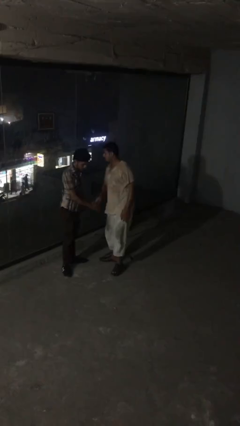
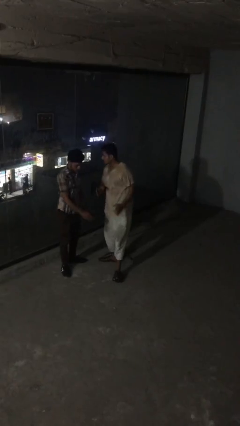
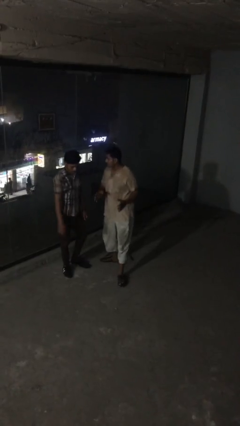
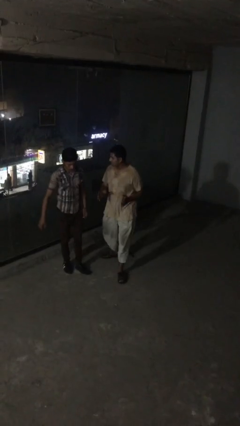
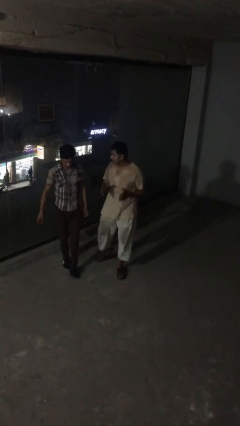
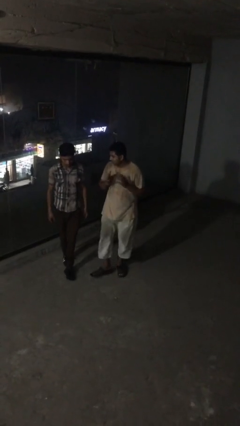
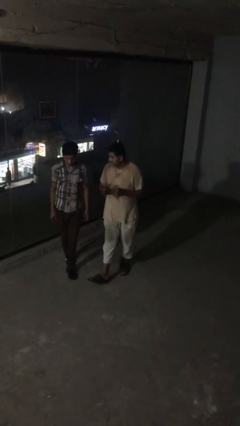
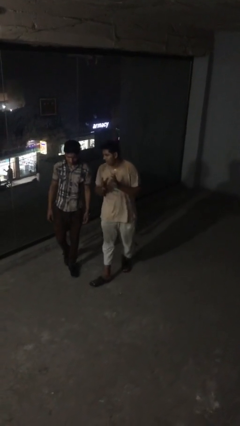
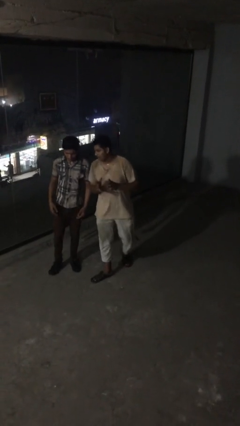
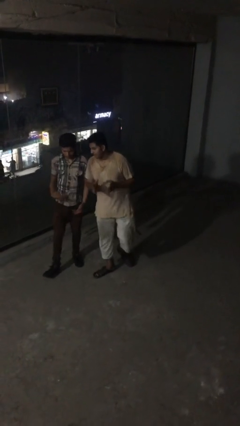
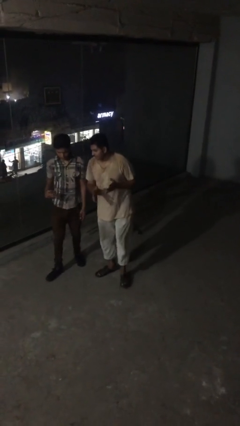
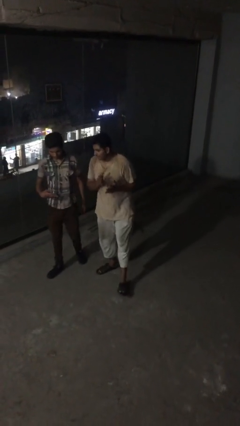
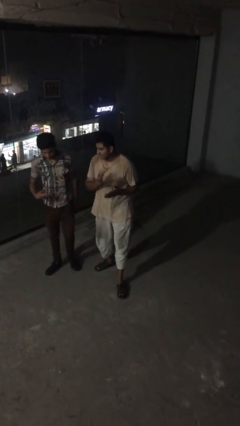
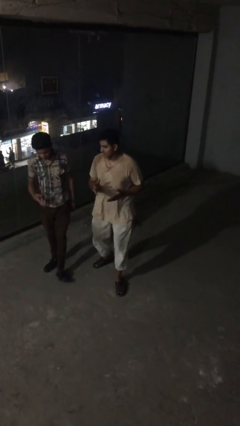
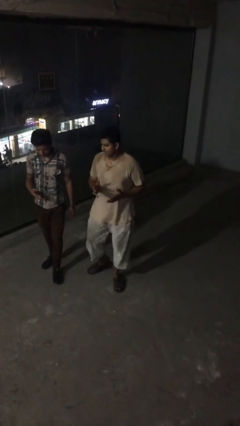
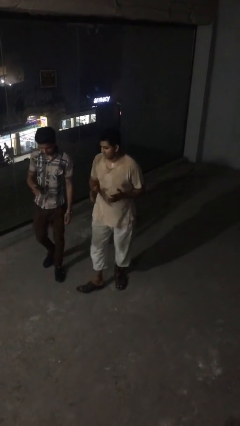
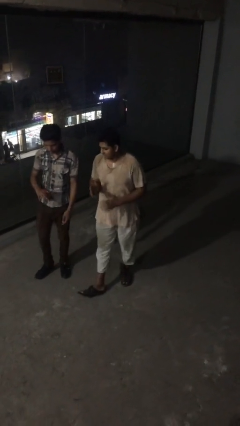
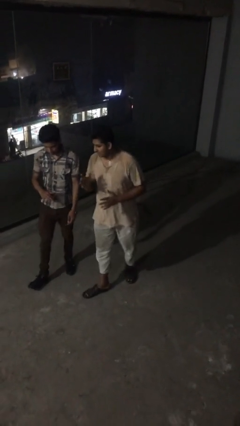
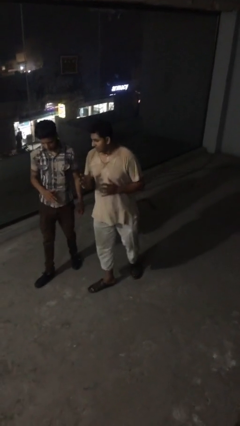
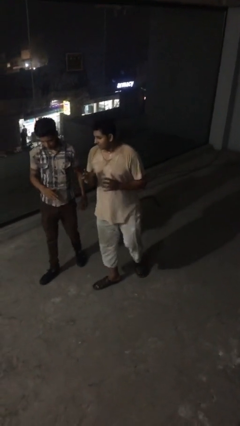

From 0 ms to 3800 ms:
person talks to person

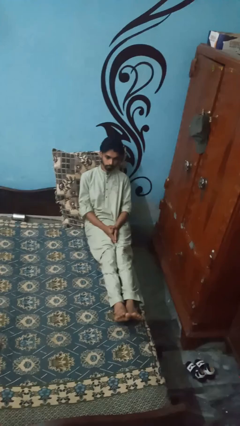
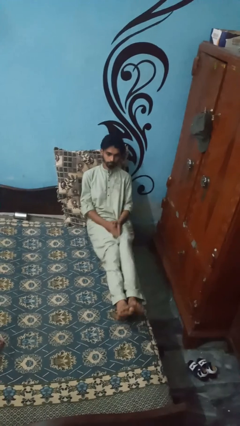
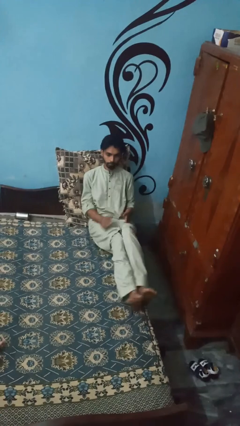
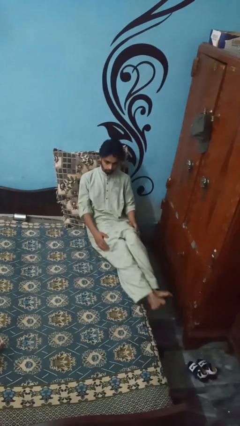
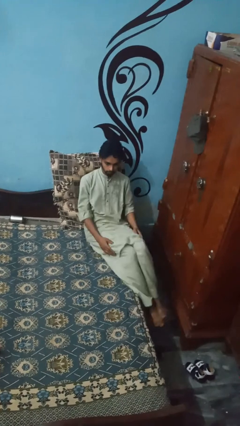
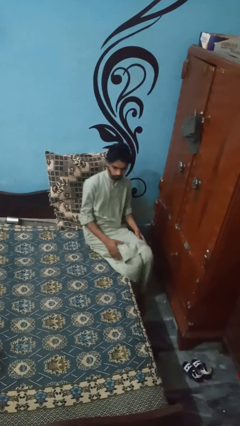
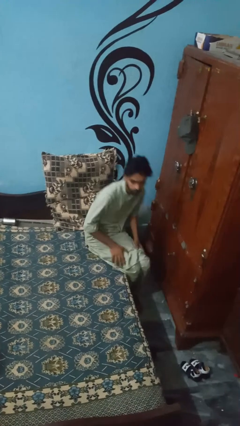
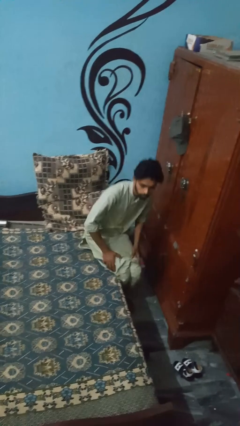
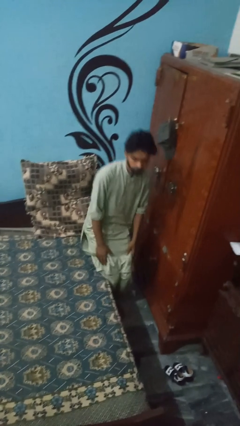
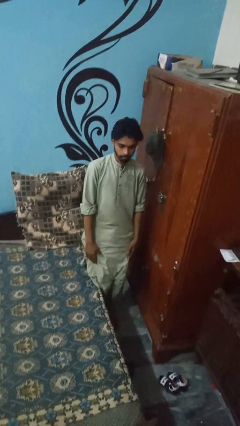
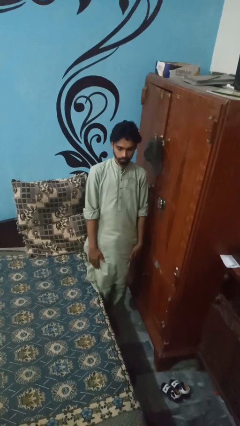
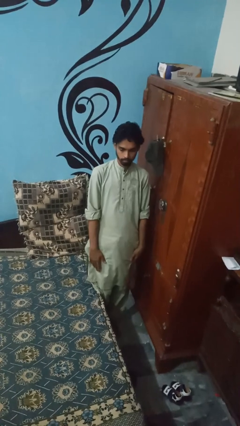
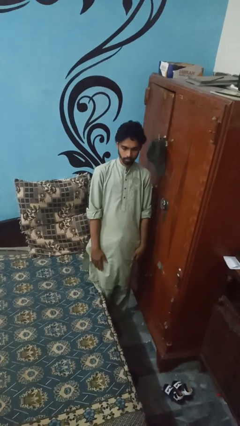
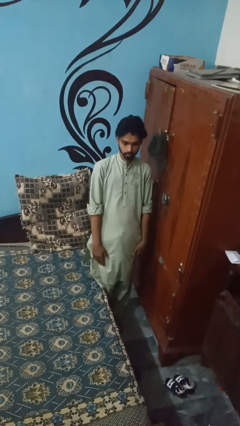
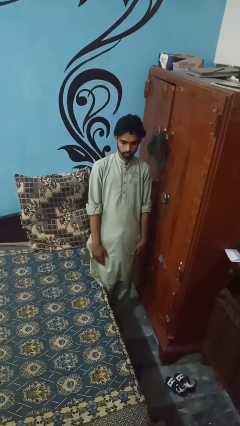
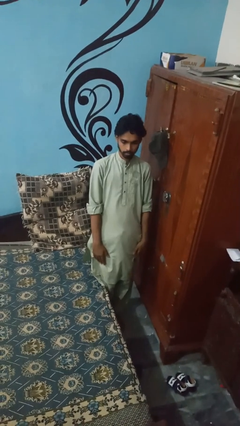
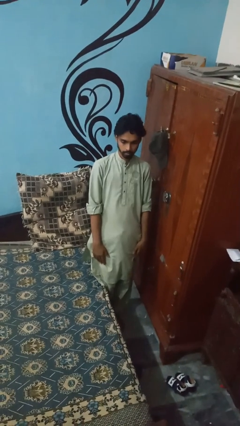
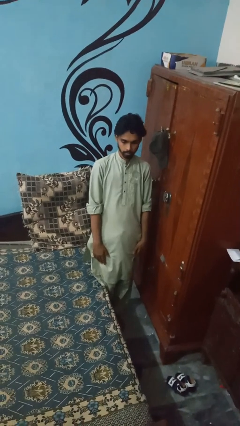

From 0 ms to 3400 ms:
person stands up

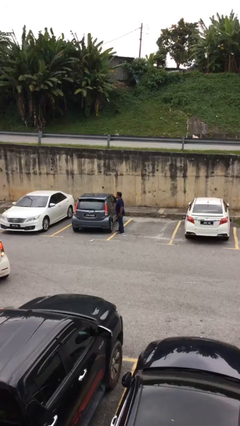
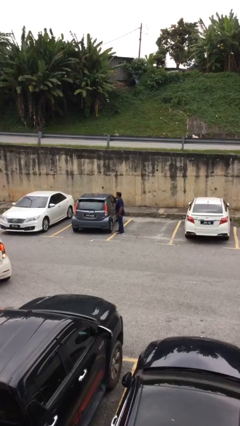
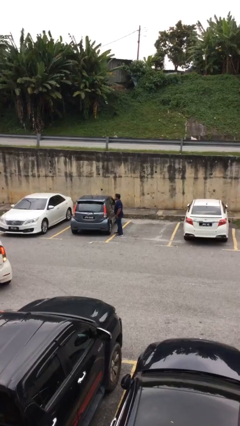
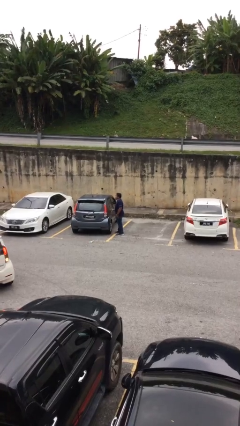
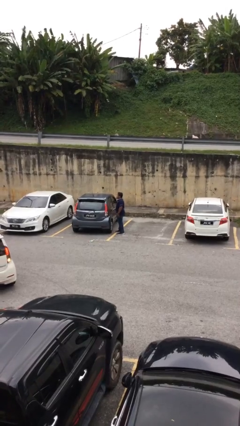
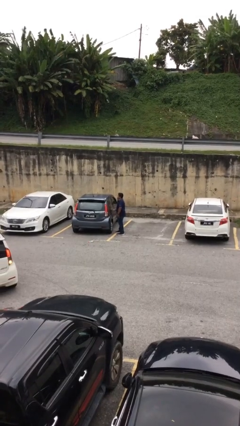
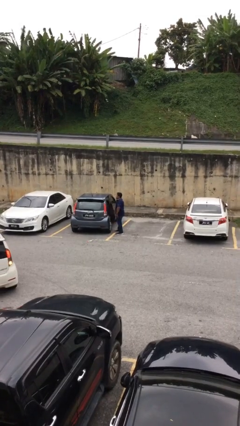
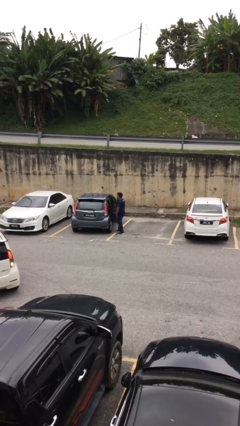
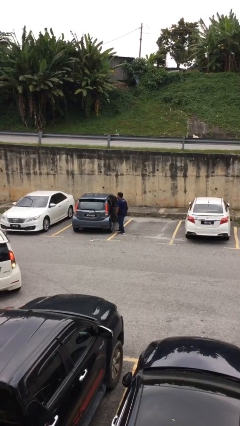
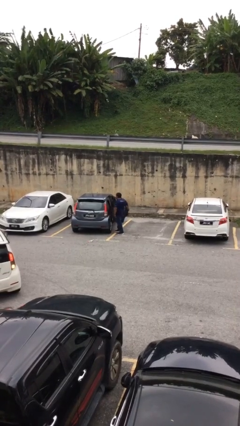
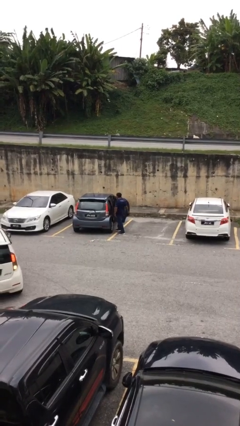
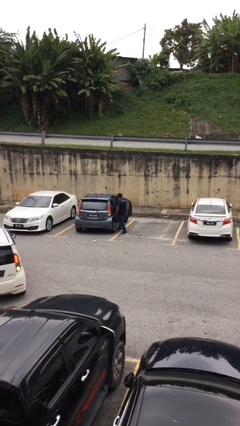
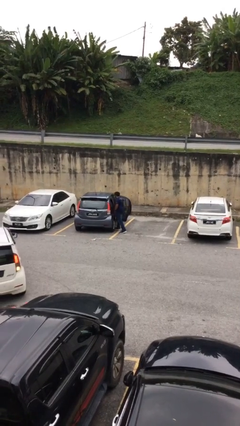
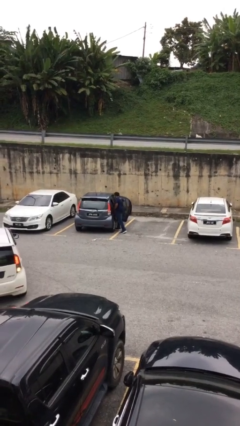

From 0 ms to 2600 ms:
person opens car door

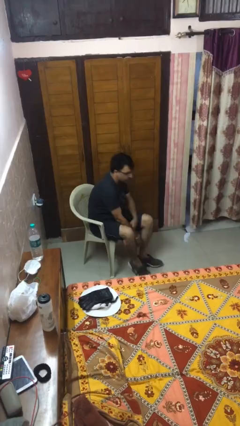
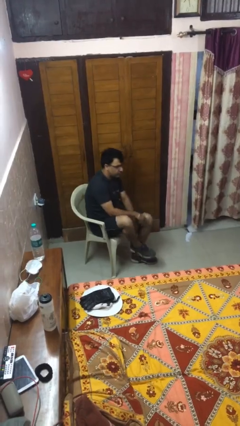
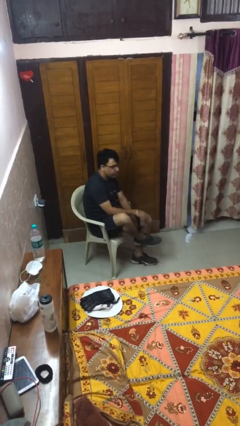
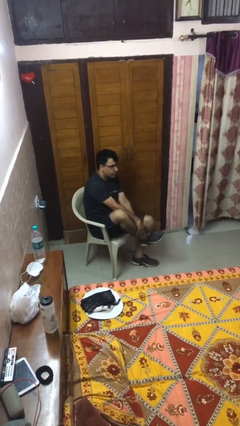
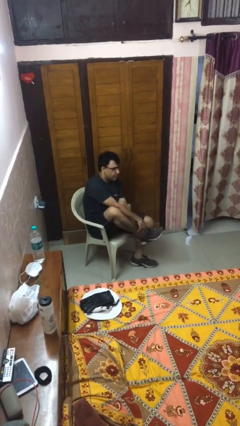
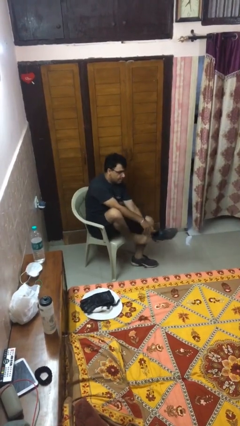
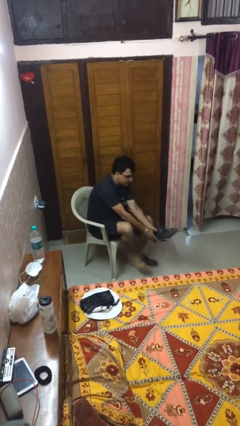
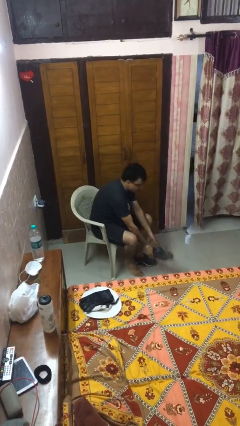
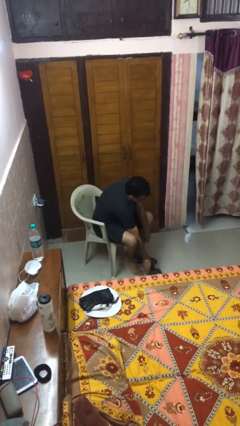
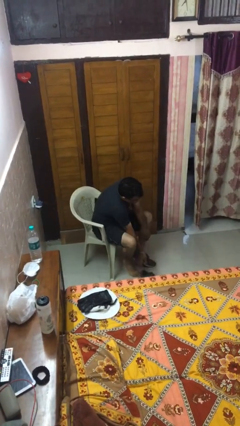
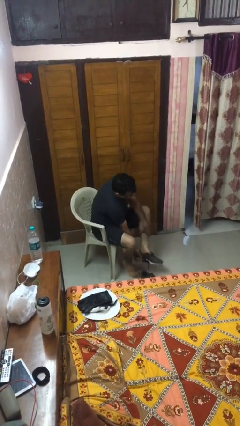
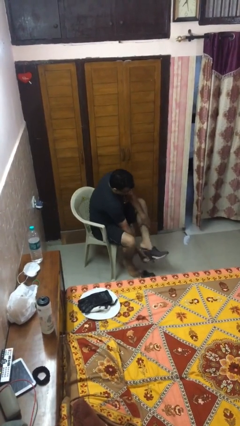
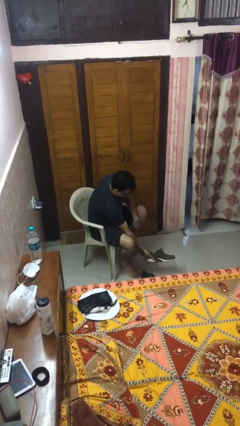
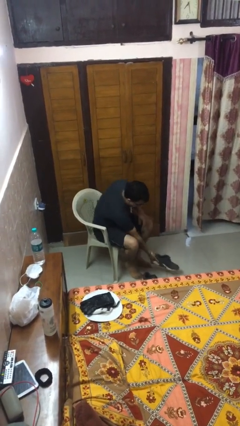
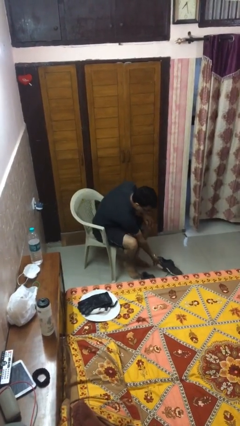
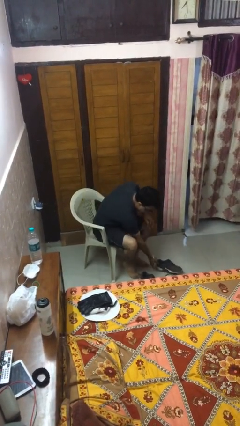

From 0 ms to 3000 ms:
person takes off shoes

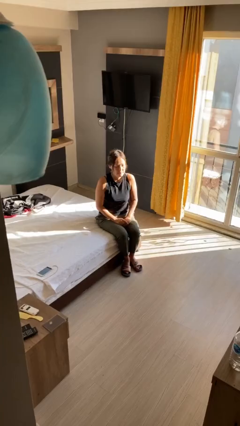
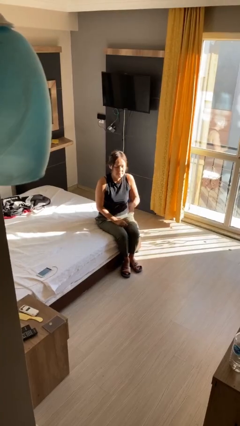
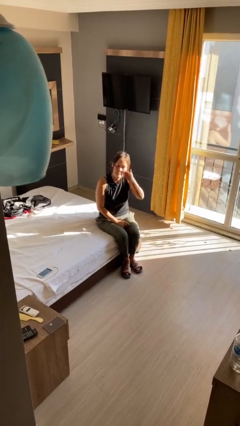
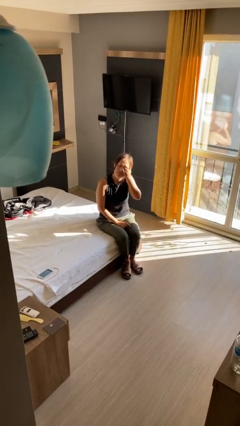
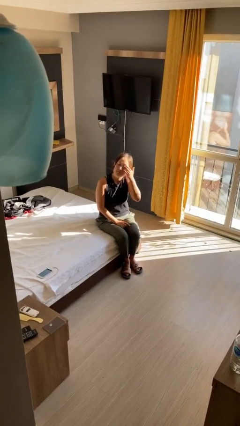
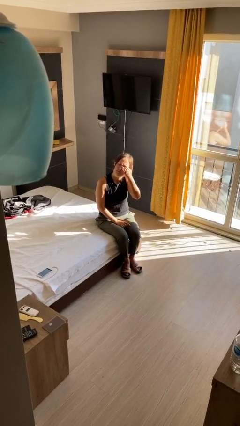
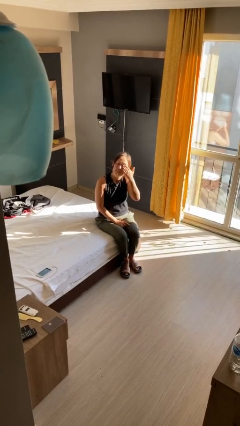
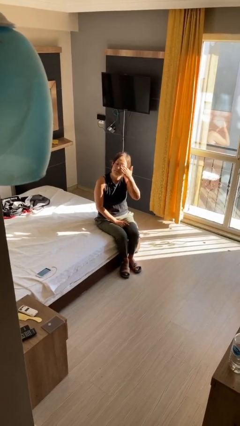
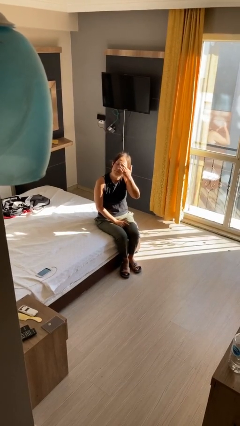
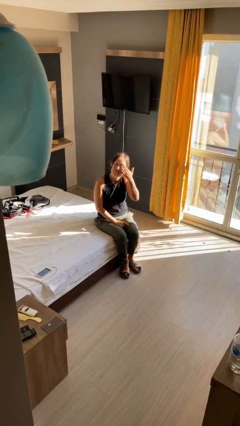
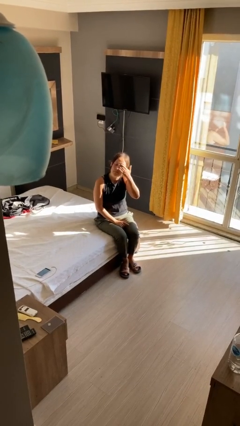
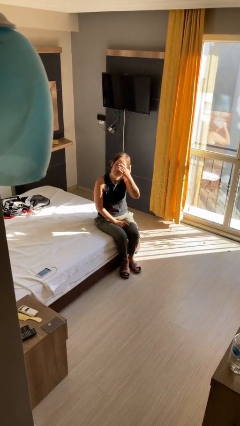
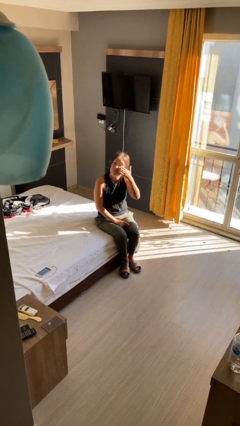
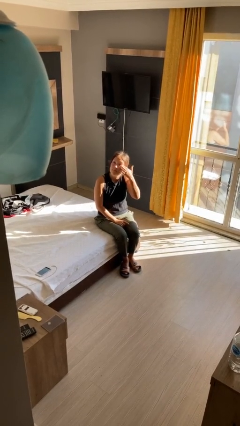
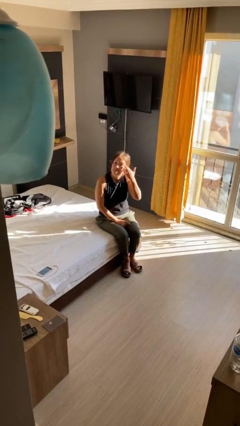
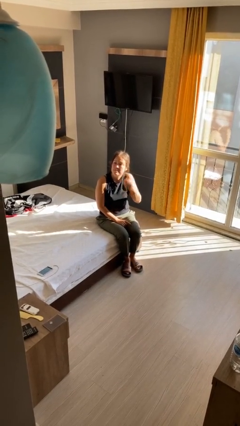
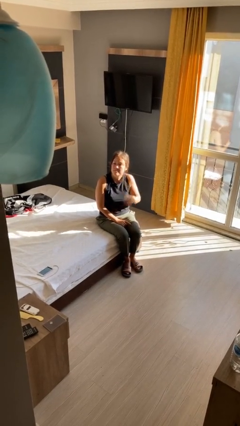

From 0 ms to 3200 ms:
person rubs eyes

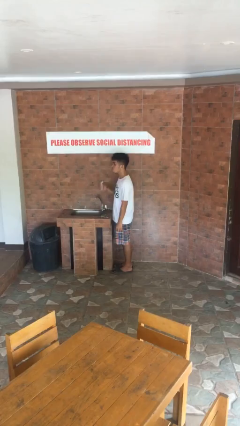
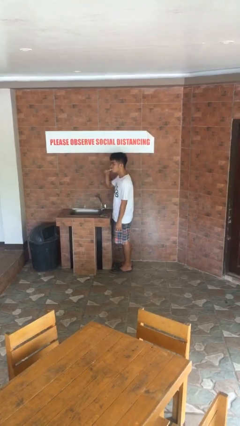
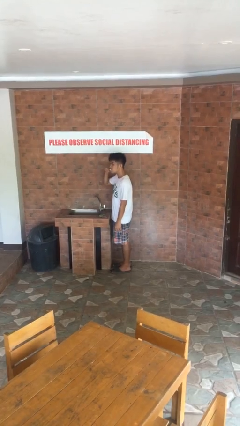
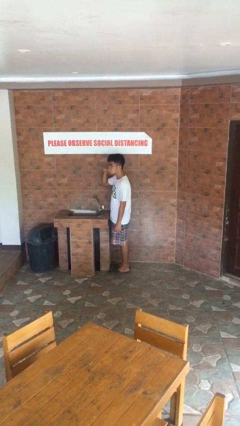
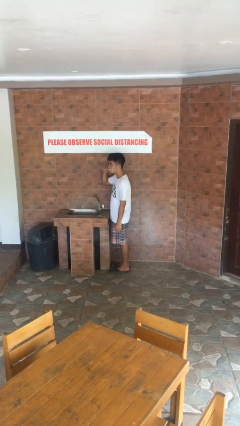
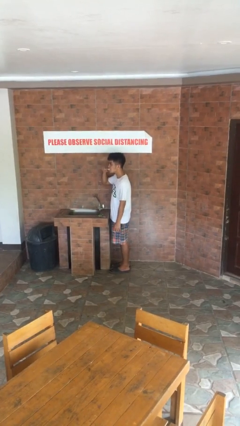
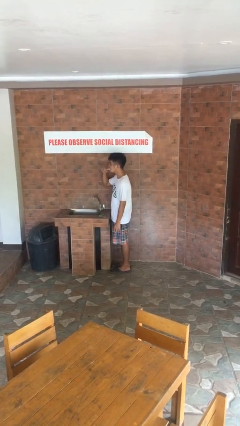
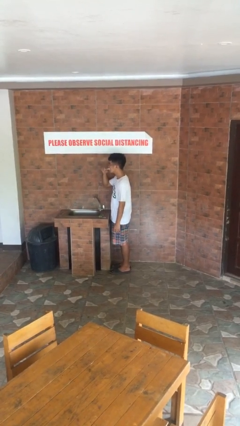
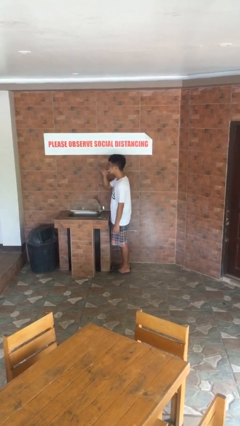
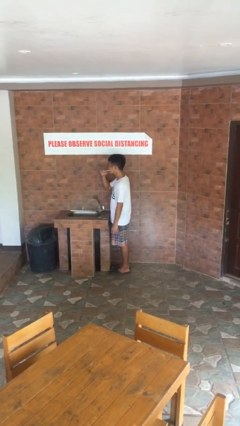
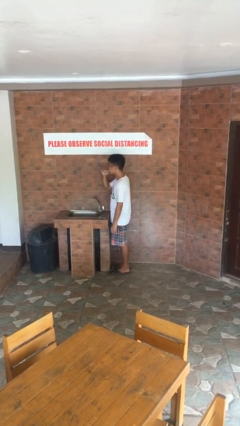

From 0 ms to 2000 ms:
person brushes teeth
